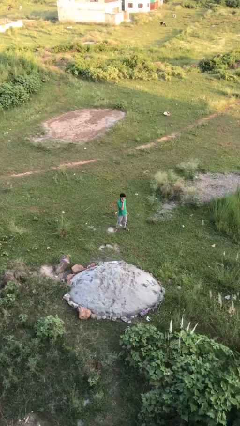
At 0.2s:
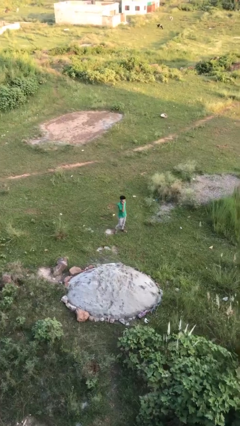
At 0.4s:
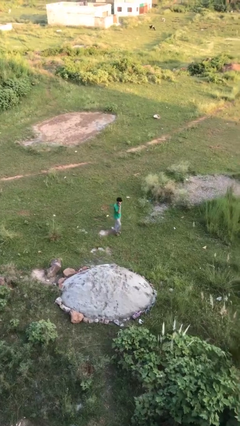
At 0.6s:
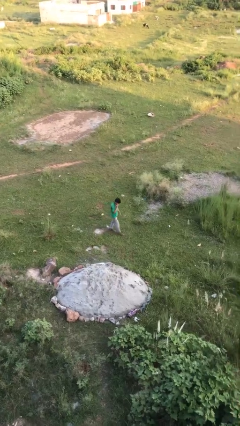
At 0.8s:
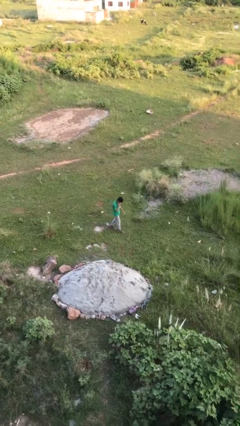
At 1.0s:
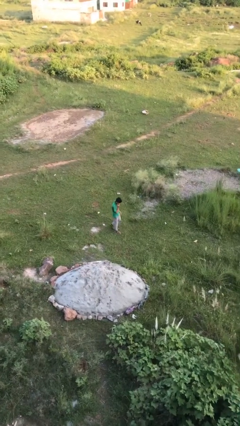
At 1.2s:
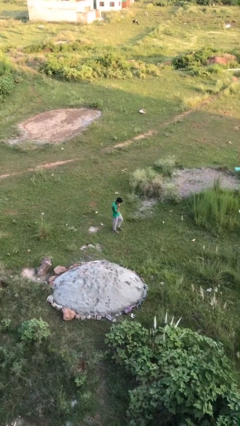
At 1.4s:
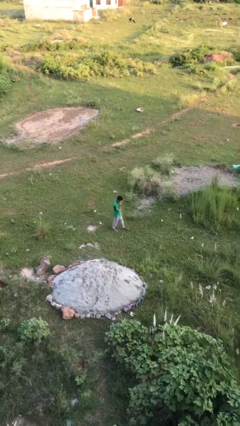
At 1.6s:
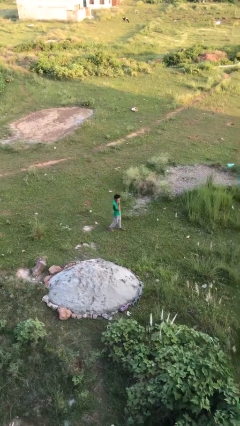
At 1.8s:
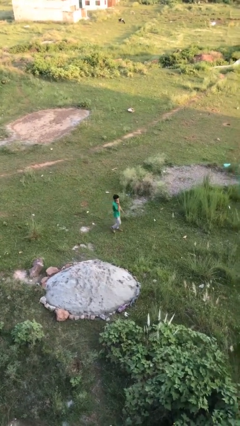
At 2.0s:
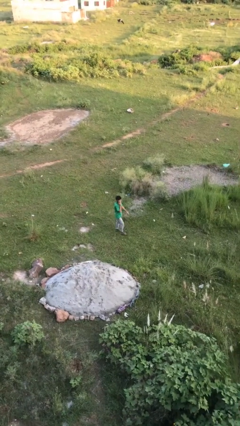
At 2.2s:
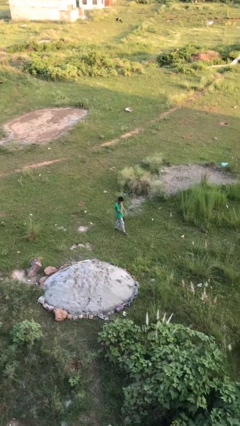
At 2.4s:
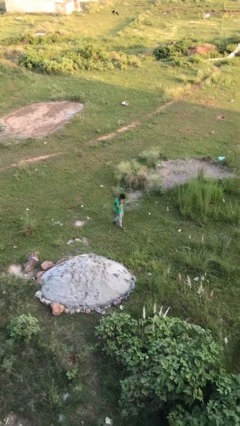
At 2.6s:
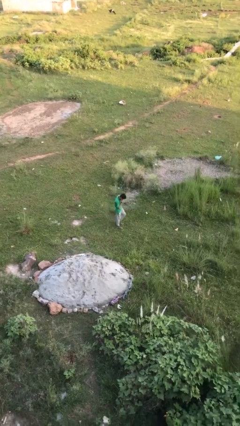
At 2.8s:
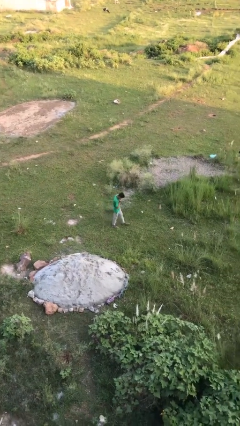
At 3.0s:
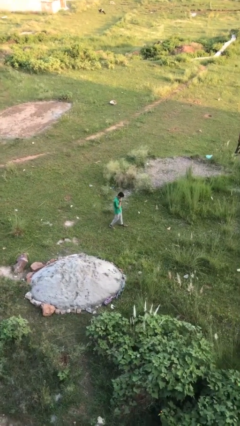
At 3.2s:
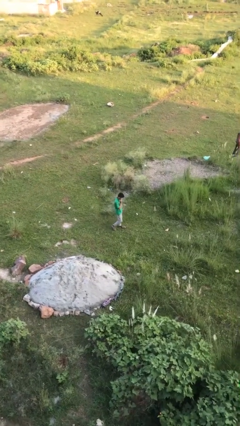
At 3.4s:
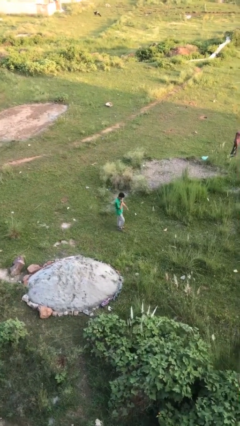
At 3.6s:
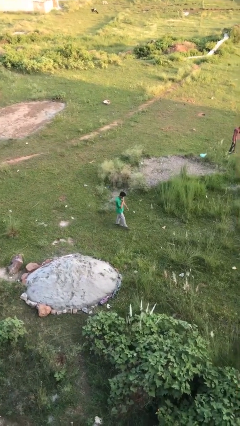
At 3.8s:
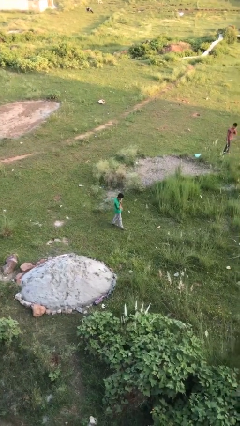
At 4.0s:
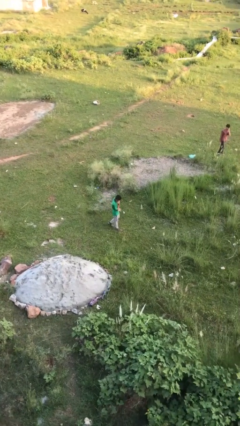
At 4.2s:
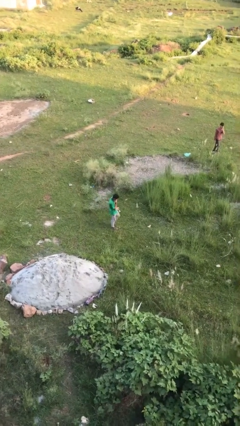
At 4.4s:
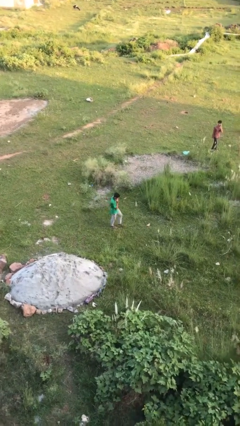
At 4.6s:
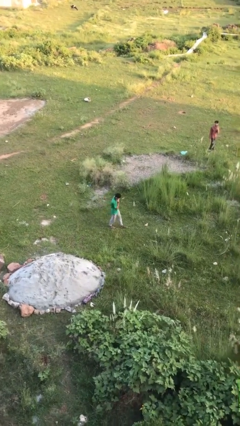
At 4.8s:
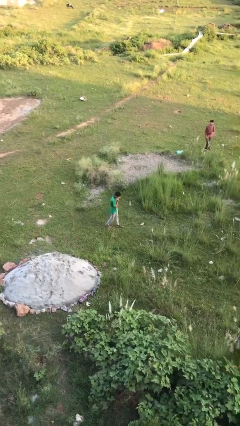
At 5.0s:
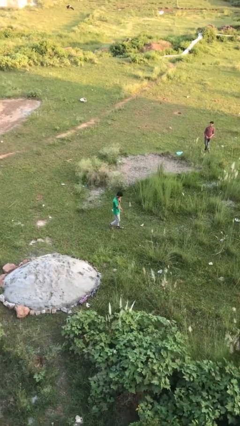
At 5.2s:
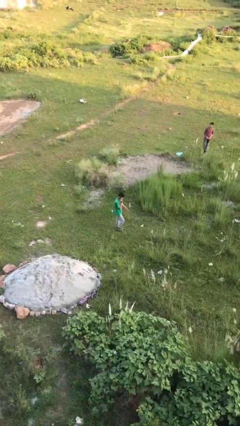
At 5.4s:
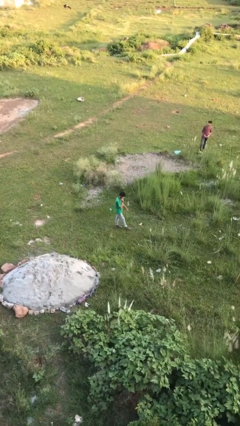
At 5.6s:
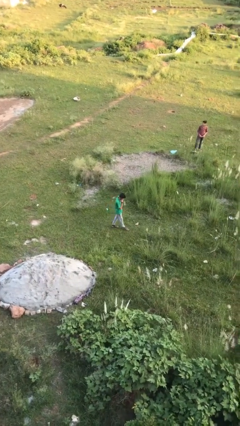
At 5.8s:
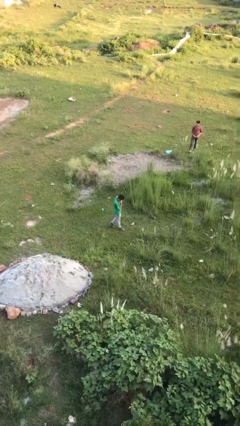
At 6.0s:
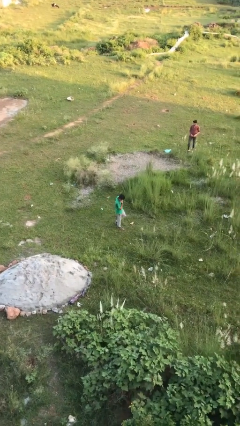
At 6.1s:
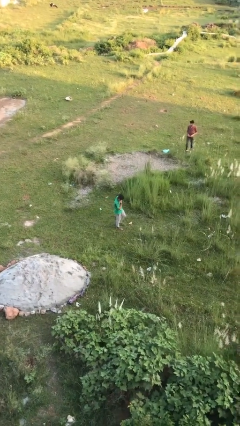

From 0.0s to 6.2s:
person talks on phone

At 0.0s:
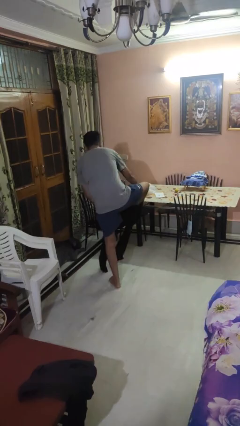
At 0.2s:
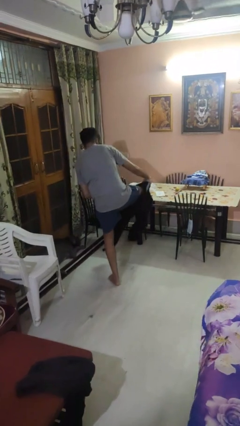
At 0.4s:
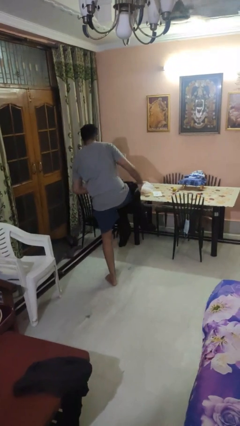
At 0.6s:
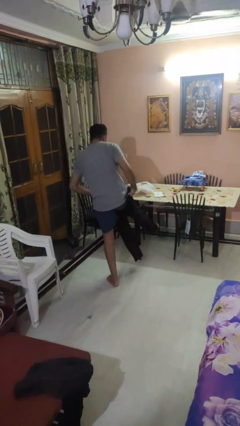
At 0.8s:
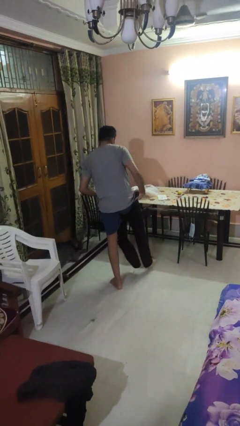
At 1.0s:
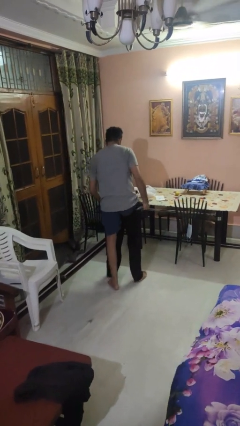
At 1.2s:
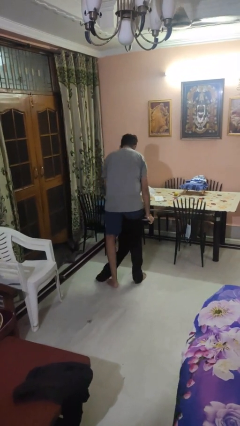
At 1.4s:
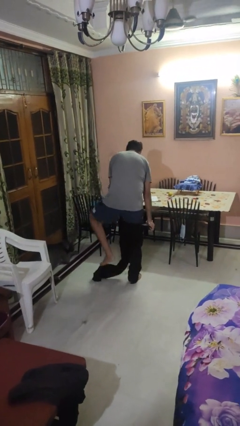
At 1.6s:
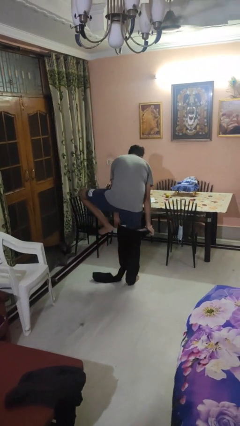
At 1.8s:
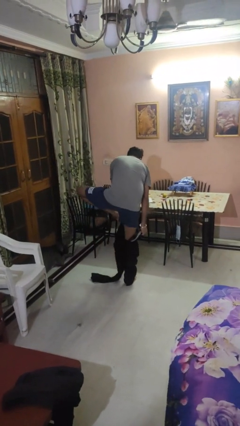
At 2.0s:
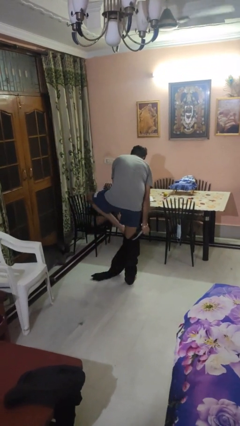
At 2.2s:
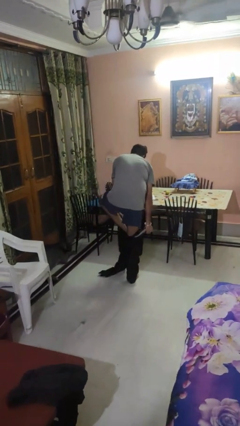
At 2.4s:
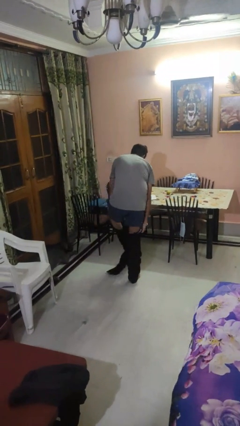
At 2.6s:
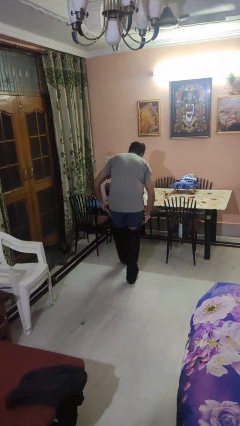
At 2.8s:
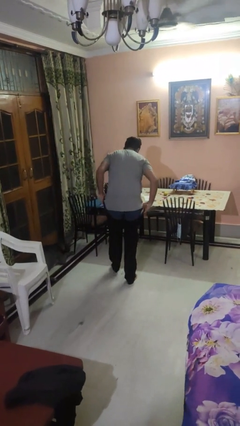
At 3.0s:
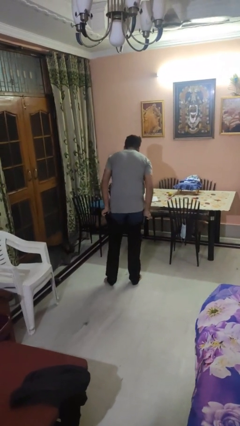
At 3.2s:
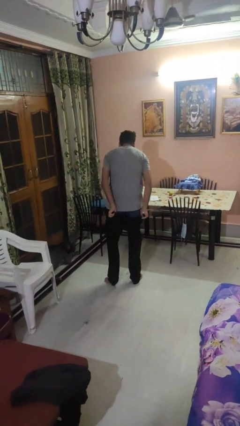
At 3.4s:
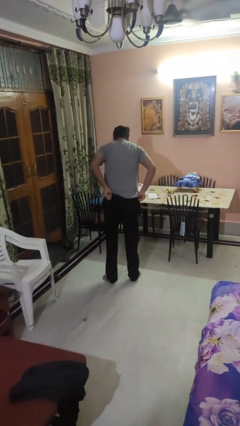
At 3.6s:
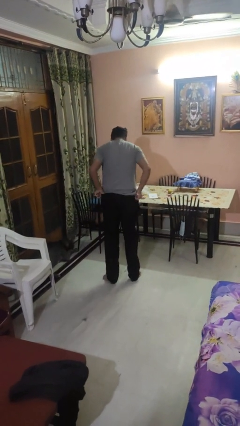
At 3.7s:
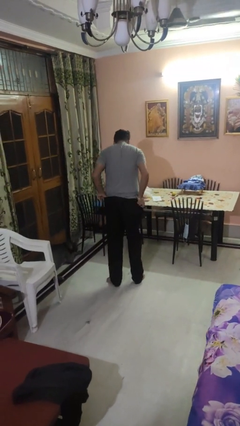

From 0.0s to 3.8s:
person puts on pants

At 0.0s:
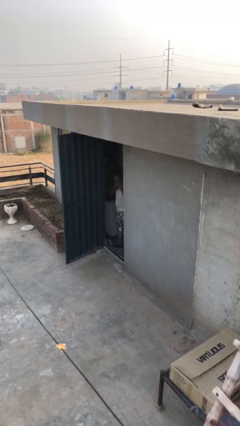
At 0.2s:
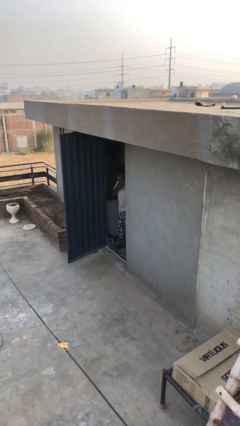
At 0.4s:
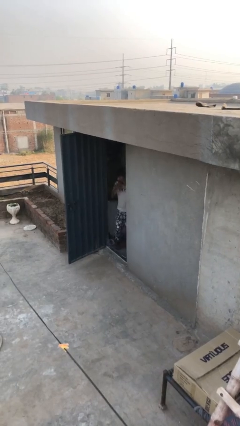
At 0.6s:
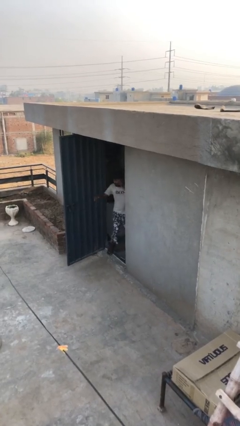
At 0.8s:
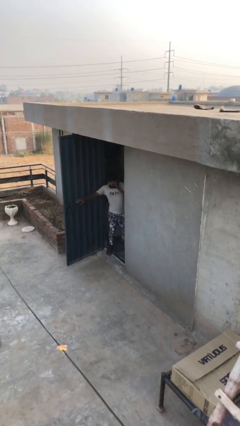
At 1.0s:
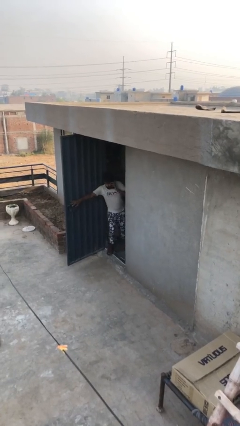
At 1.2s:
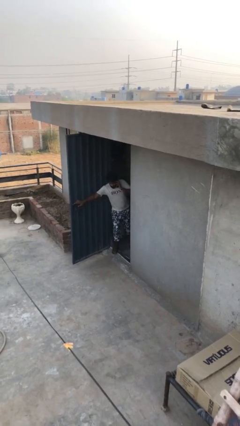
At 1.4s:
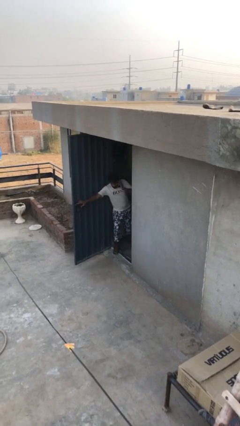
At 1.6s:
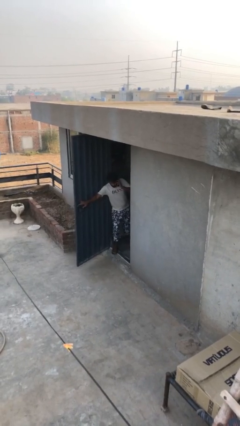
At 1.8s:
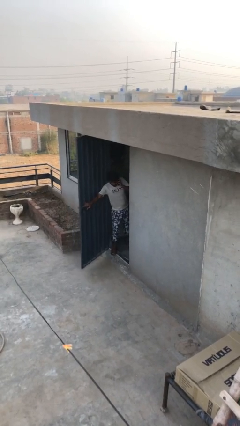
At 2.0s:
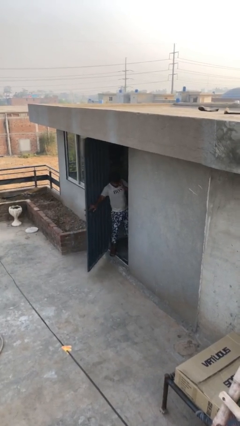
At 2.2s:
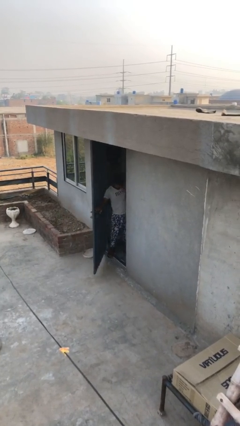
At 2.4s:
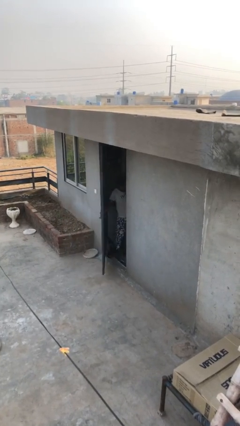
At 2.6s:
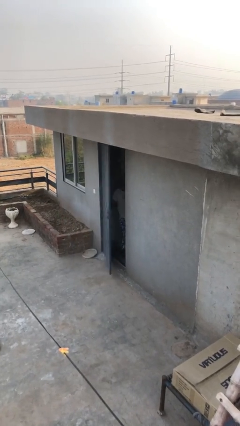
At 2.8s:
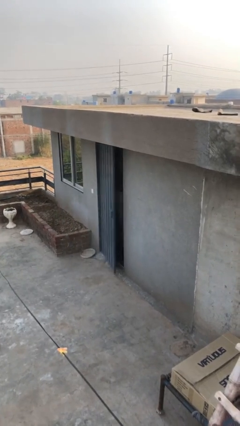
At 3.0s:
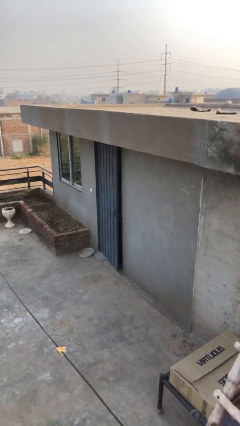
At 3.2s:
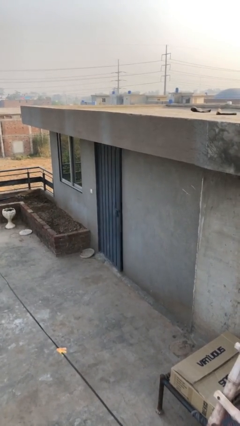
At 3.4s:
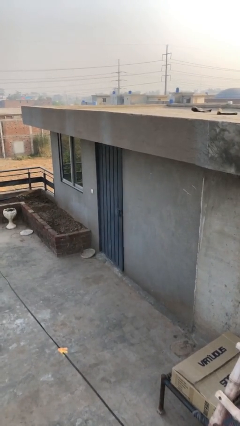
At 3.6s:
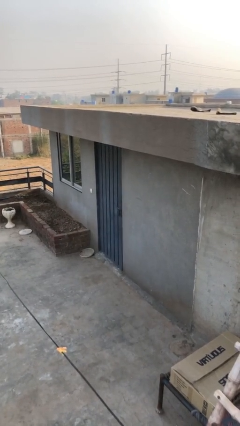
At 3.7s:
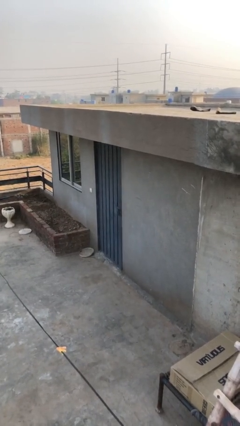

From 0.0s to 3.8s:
person closes facility door

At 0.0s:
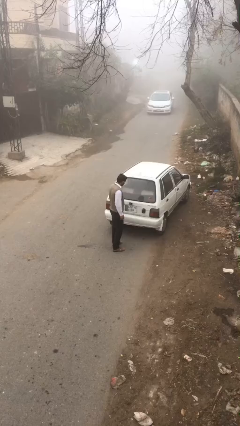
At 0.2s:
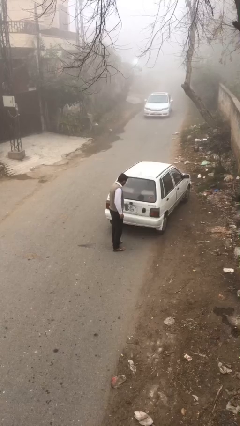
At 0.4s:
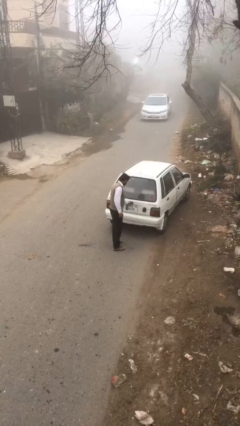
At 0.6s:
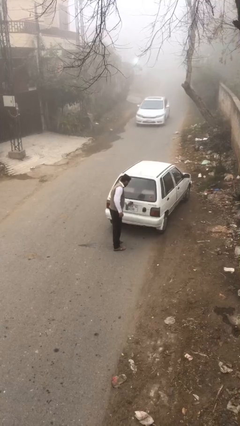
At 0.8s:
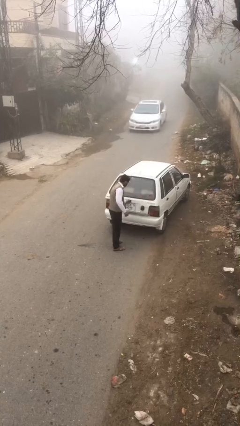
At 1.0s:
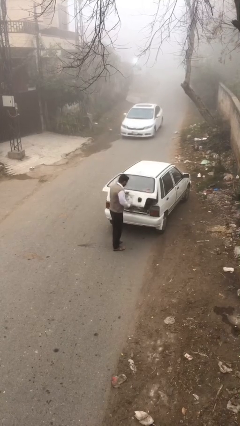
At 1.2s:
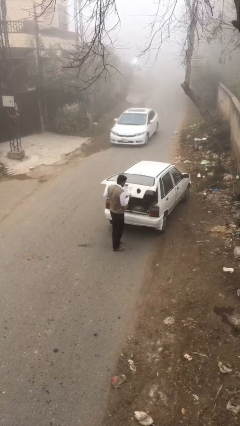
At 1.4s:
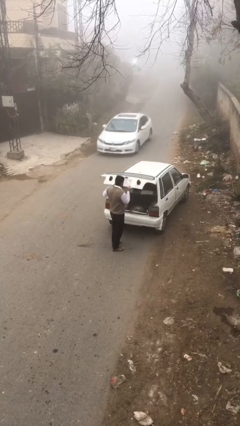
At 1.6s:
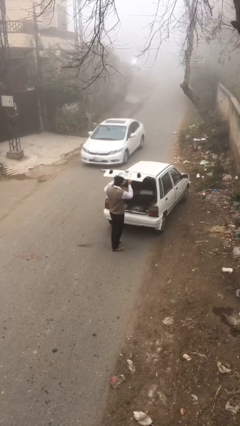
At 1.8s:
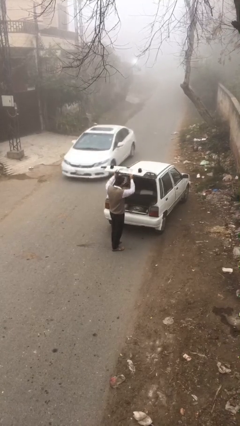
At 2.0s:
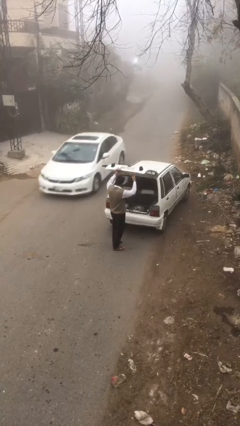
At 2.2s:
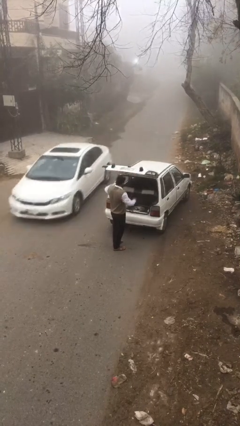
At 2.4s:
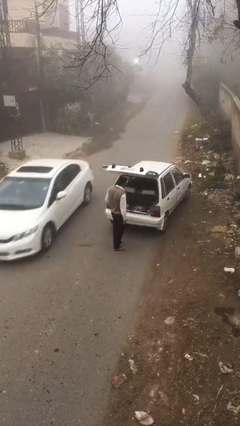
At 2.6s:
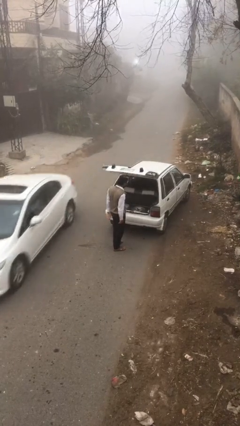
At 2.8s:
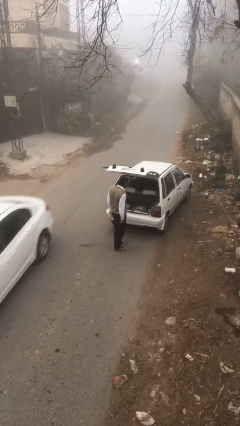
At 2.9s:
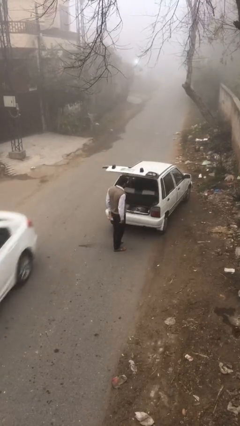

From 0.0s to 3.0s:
person opens car trunk

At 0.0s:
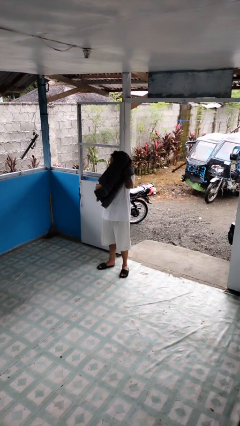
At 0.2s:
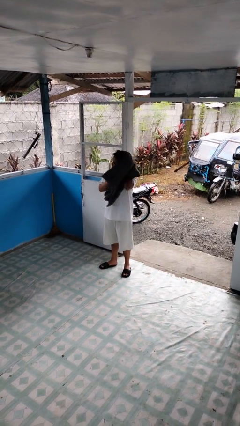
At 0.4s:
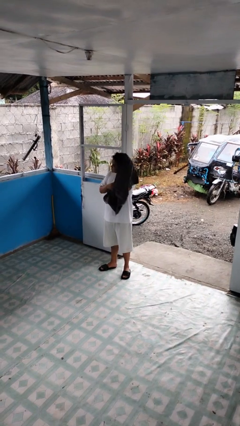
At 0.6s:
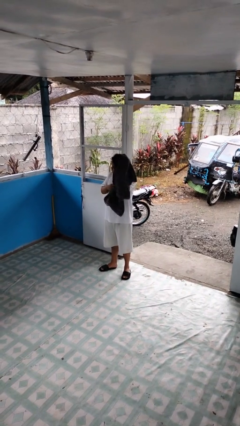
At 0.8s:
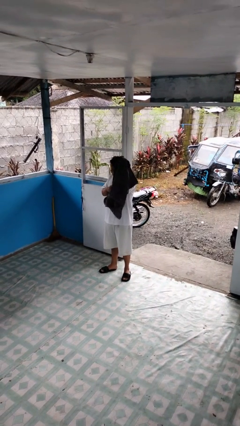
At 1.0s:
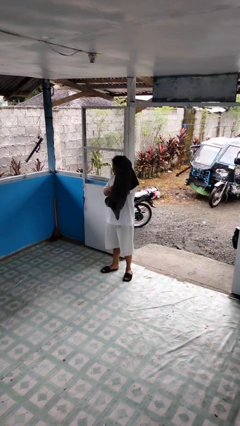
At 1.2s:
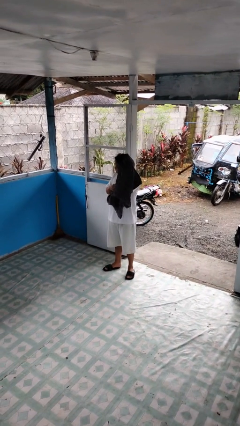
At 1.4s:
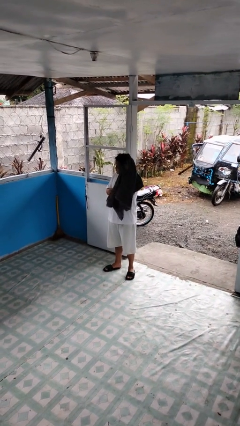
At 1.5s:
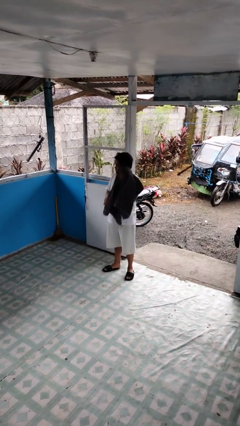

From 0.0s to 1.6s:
person dries hair with towel
